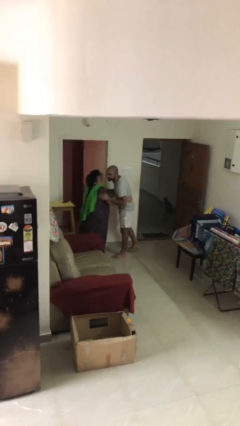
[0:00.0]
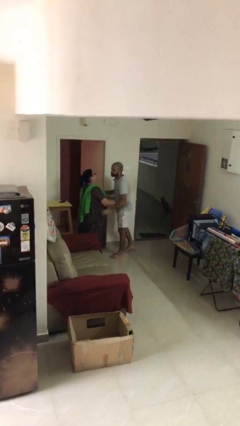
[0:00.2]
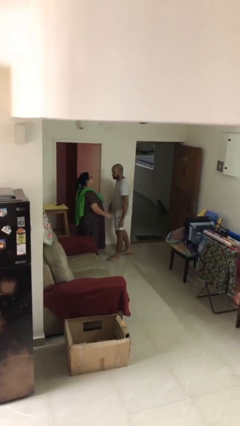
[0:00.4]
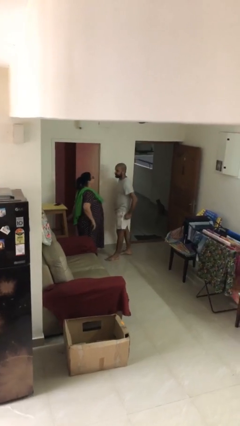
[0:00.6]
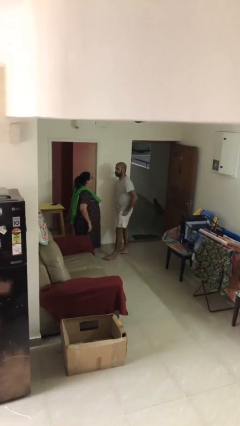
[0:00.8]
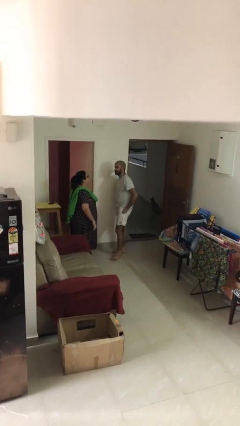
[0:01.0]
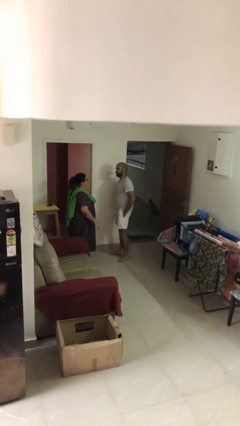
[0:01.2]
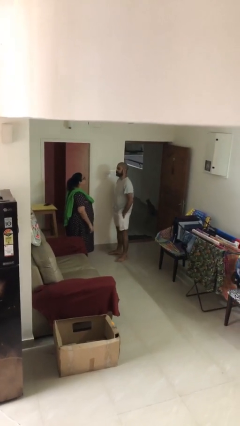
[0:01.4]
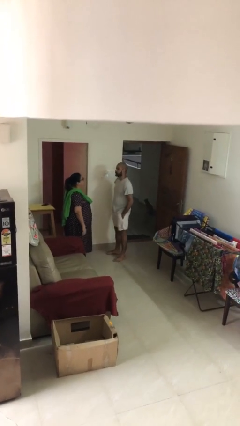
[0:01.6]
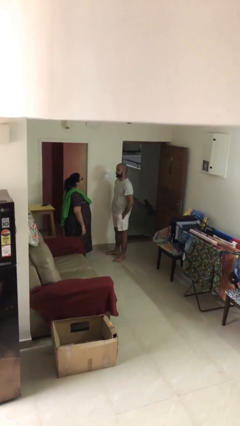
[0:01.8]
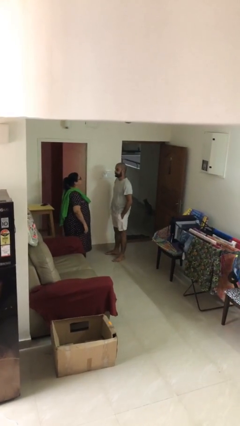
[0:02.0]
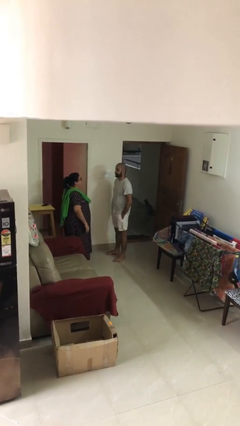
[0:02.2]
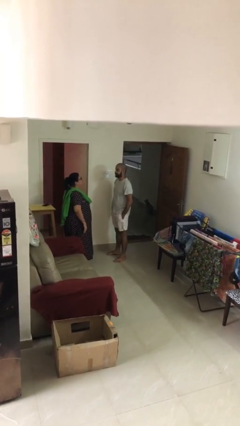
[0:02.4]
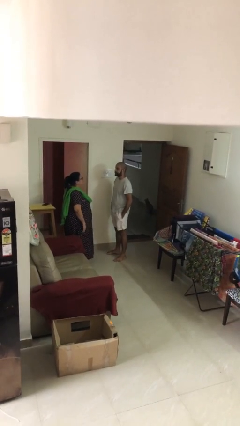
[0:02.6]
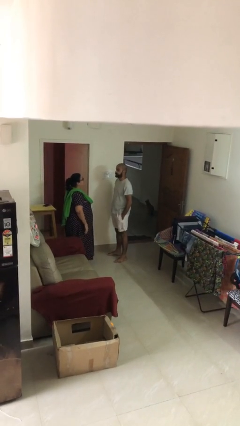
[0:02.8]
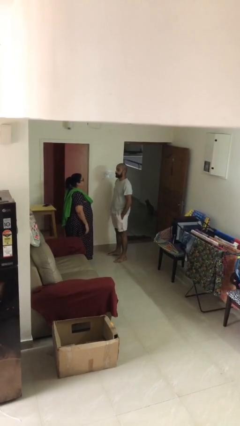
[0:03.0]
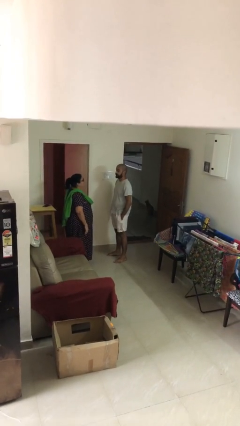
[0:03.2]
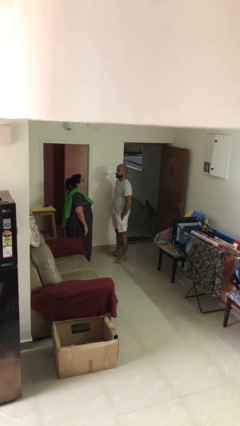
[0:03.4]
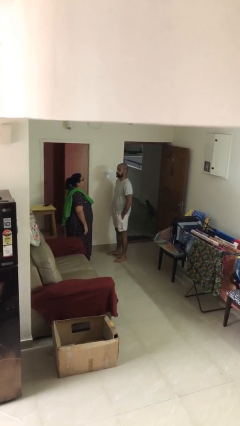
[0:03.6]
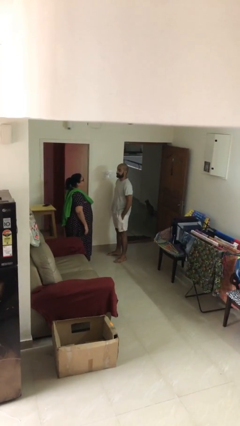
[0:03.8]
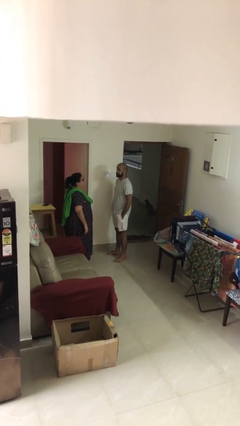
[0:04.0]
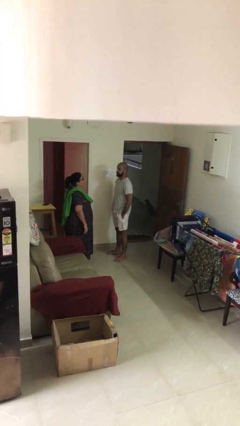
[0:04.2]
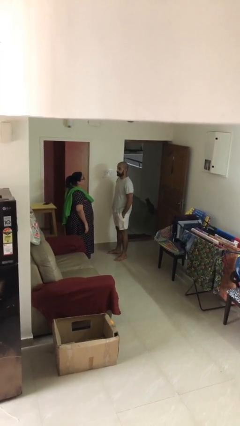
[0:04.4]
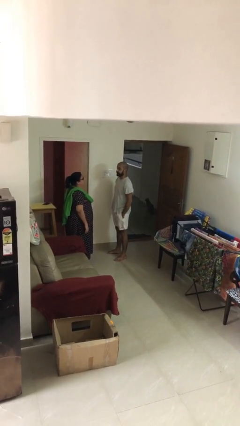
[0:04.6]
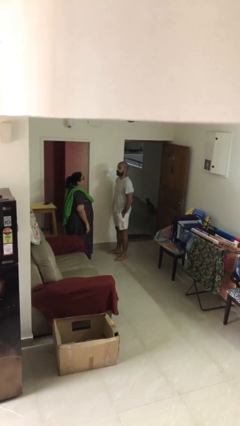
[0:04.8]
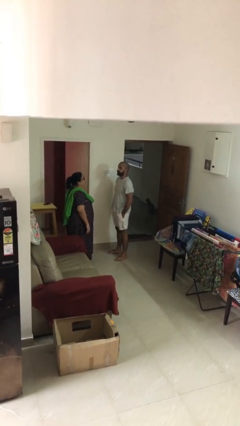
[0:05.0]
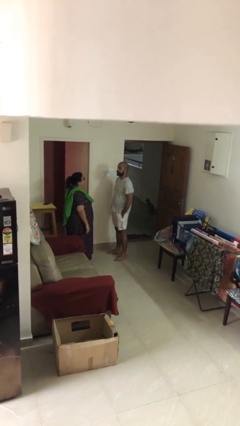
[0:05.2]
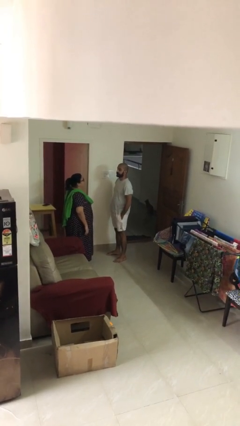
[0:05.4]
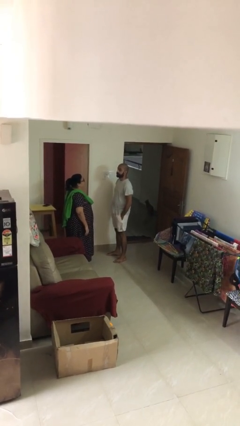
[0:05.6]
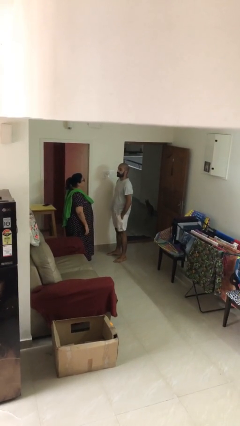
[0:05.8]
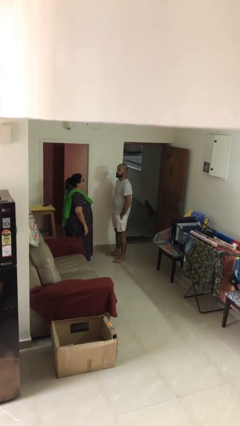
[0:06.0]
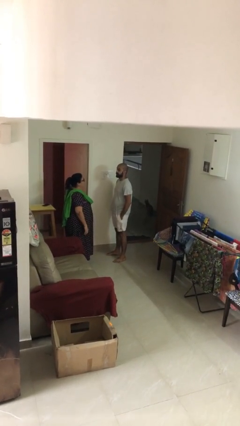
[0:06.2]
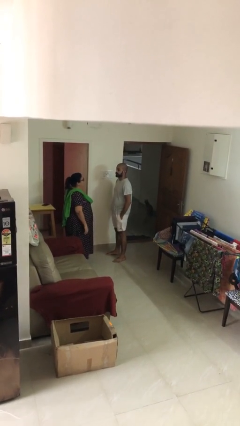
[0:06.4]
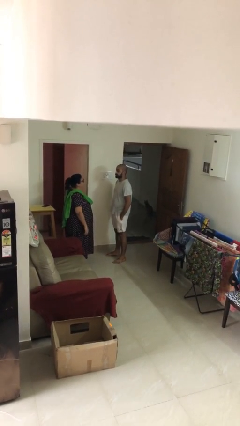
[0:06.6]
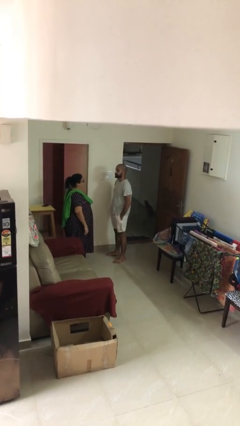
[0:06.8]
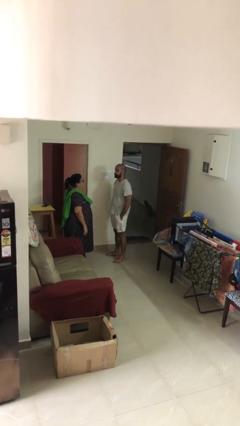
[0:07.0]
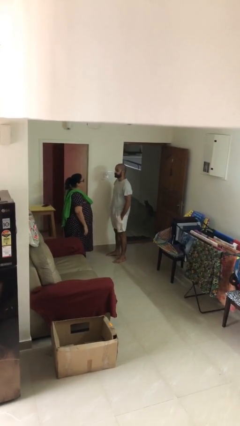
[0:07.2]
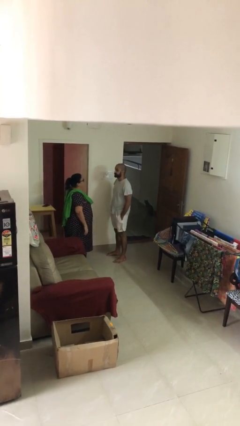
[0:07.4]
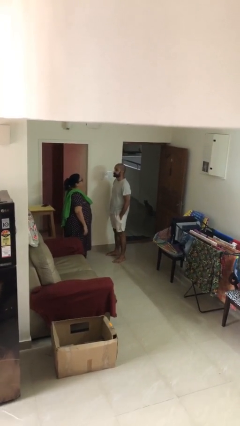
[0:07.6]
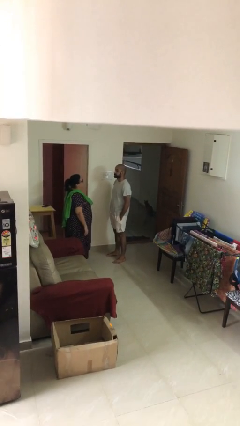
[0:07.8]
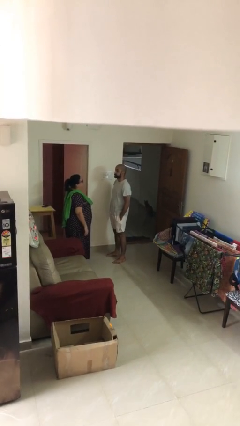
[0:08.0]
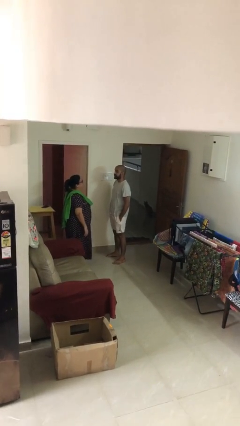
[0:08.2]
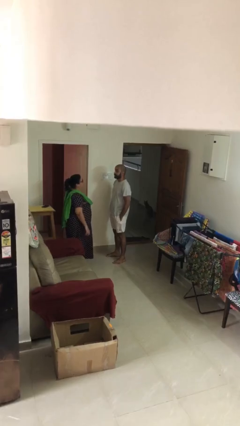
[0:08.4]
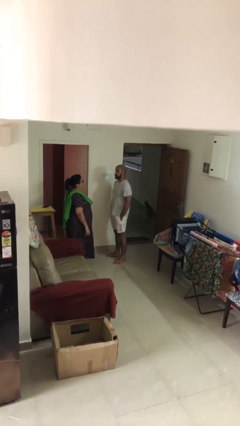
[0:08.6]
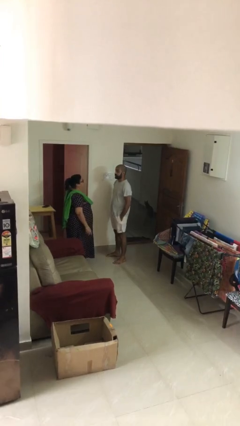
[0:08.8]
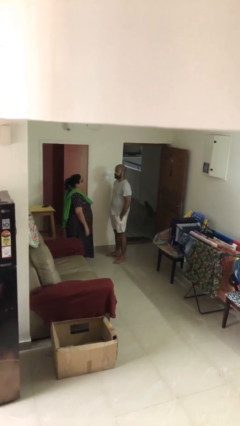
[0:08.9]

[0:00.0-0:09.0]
person talks to person

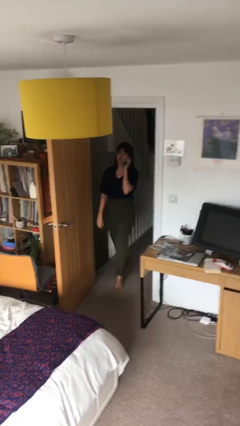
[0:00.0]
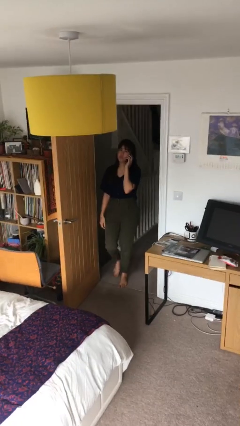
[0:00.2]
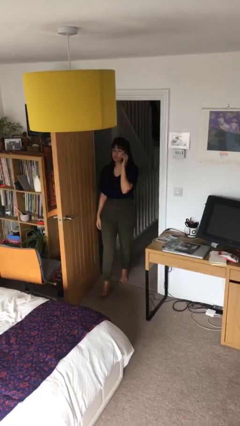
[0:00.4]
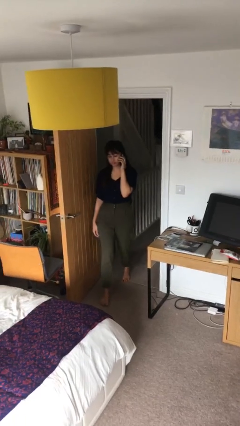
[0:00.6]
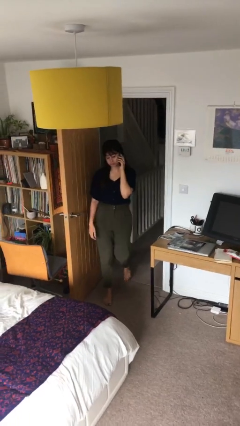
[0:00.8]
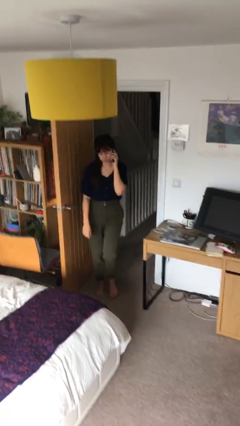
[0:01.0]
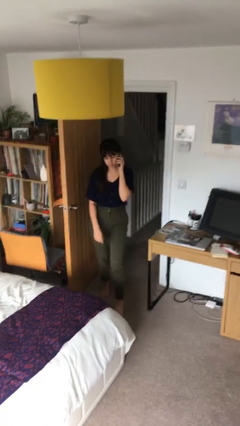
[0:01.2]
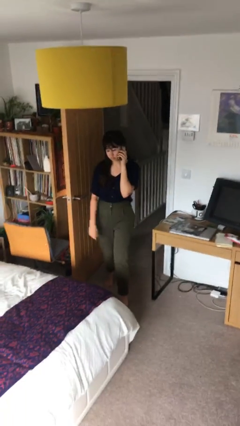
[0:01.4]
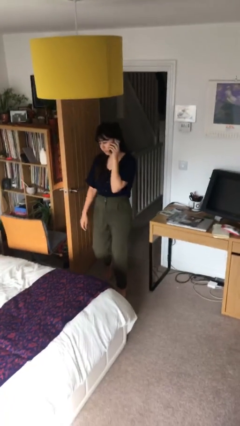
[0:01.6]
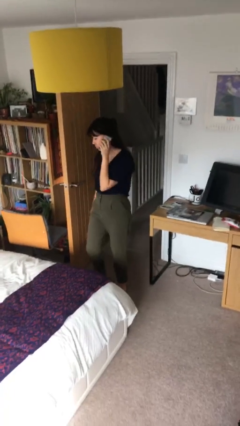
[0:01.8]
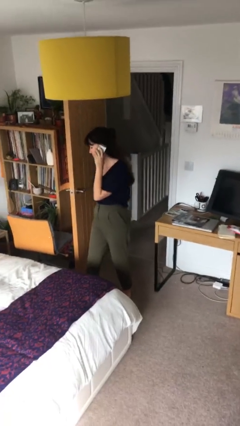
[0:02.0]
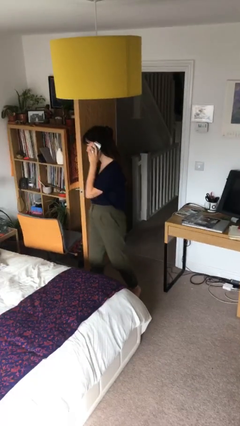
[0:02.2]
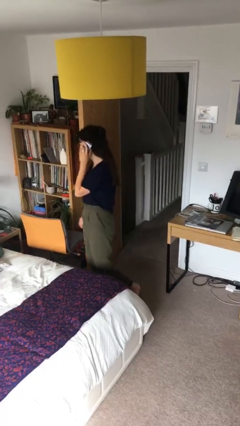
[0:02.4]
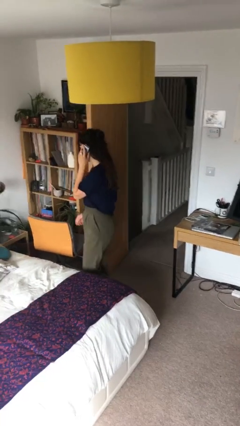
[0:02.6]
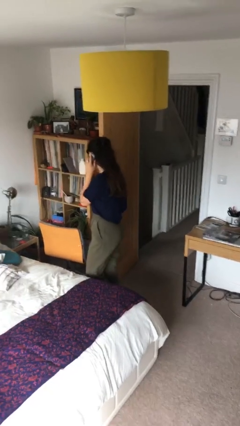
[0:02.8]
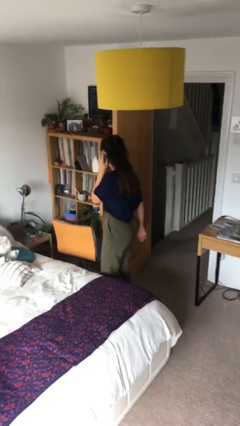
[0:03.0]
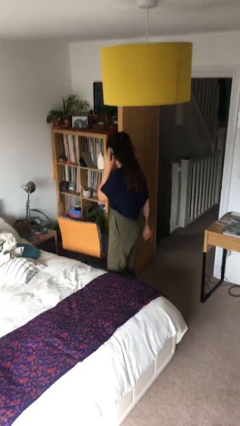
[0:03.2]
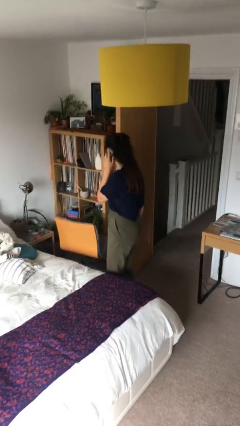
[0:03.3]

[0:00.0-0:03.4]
person enters scene through structure

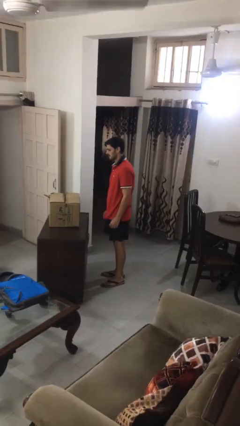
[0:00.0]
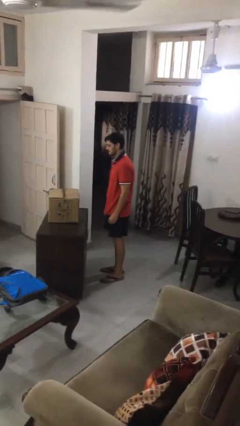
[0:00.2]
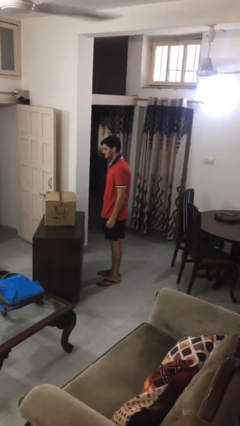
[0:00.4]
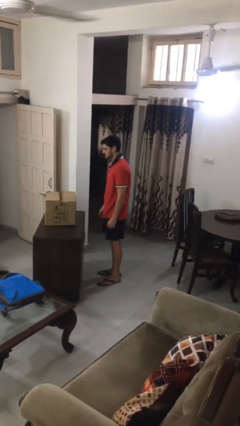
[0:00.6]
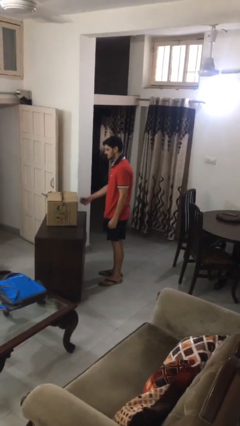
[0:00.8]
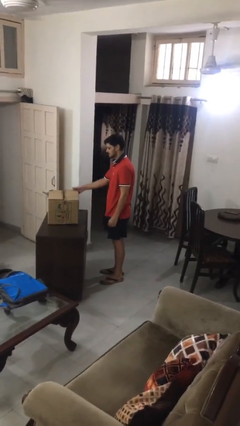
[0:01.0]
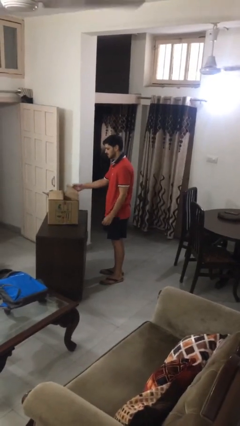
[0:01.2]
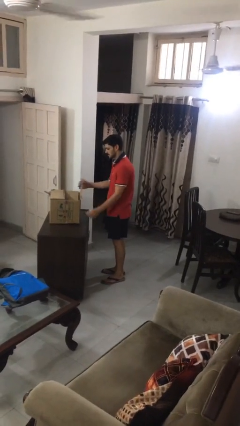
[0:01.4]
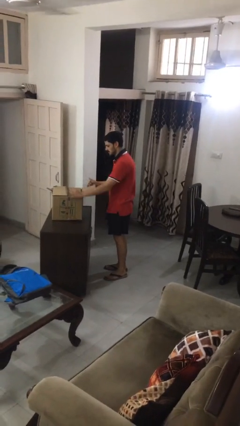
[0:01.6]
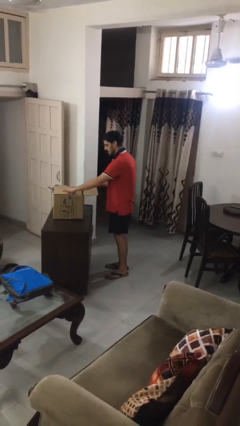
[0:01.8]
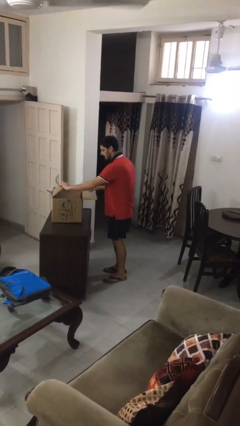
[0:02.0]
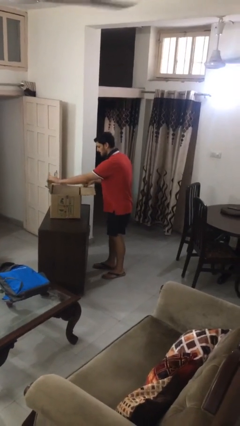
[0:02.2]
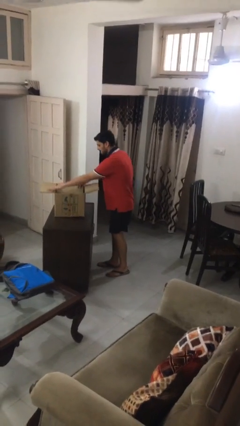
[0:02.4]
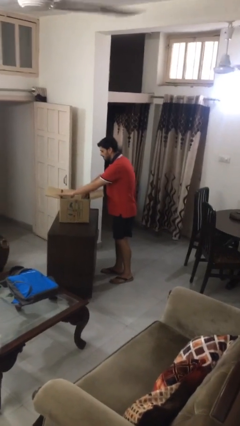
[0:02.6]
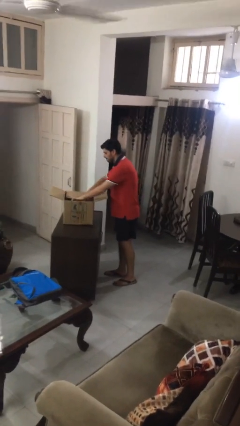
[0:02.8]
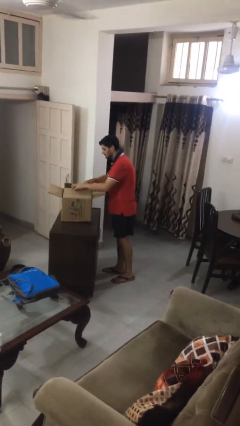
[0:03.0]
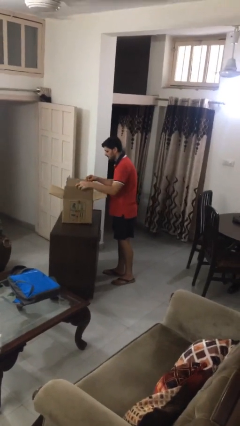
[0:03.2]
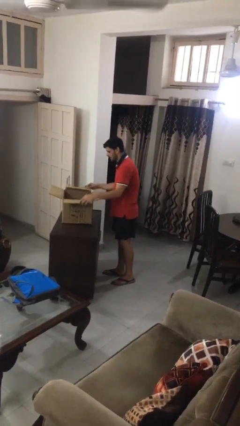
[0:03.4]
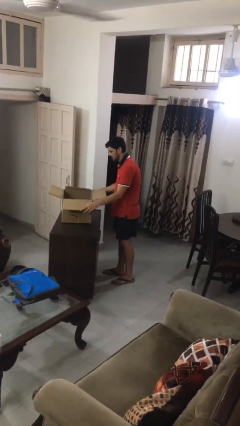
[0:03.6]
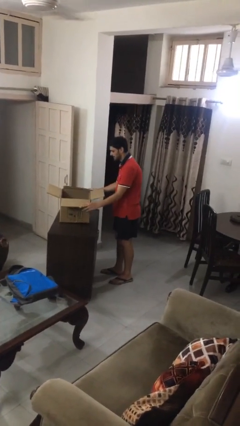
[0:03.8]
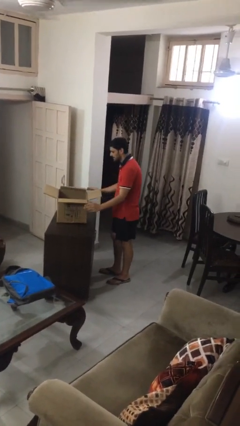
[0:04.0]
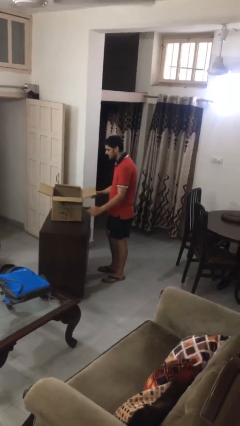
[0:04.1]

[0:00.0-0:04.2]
person opens box

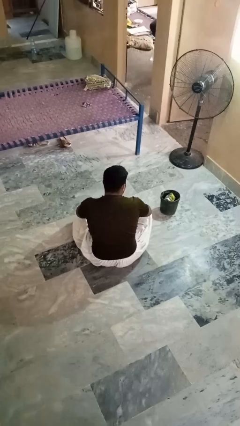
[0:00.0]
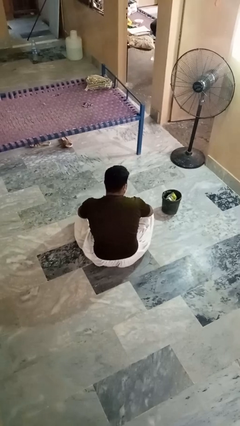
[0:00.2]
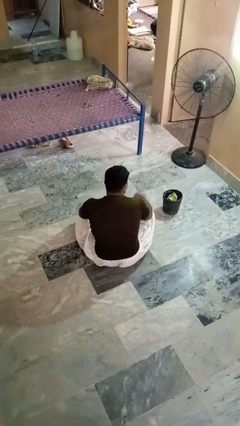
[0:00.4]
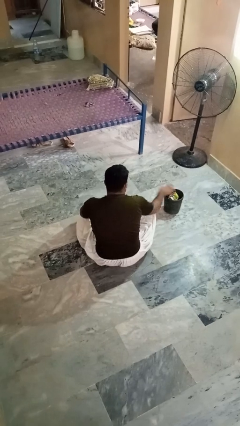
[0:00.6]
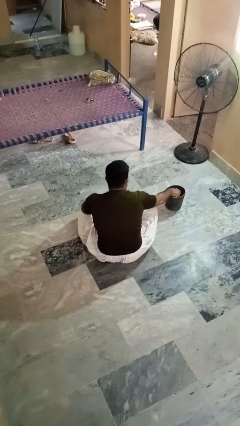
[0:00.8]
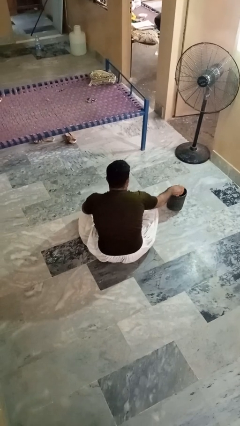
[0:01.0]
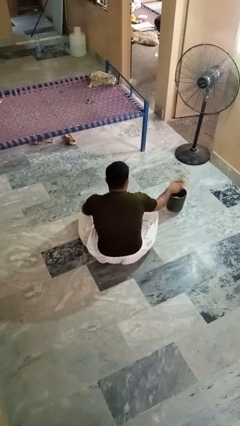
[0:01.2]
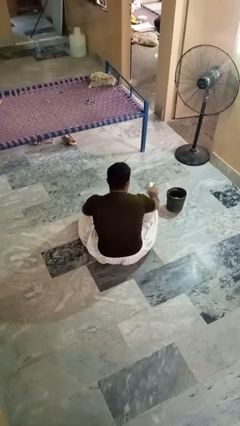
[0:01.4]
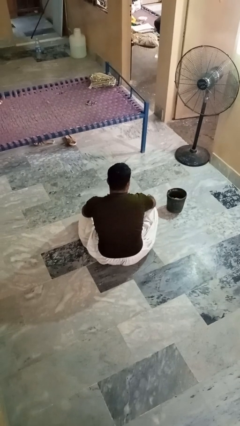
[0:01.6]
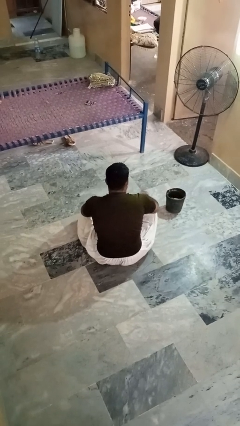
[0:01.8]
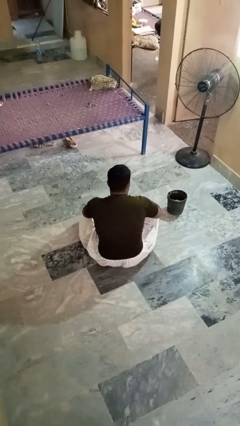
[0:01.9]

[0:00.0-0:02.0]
person takes object from basket
